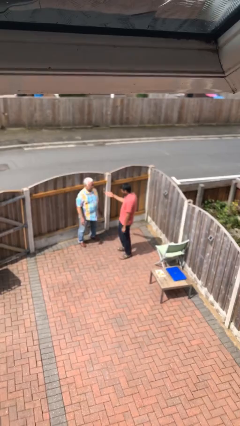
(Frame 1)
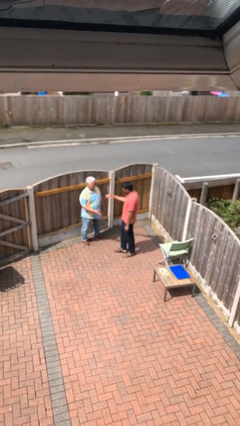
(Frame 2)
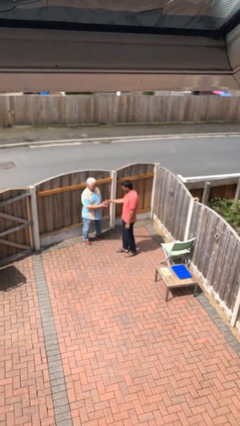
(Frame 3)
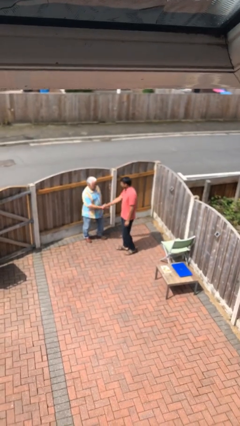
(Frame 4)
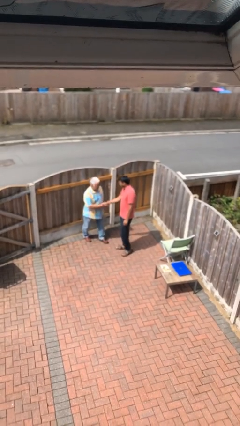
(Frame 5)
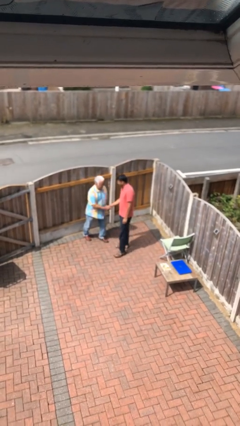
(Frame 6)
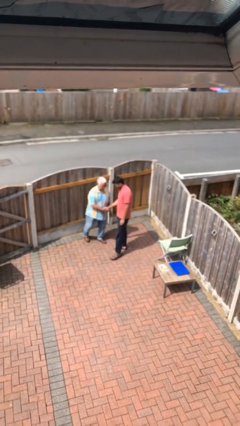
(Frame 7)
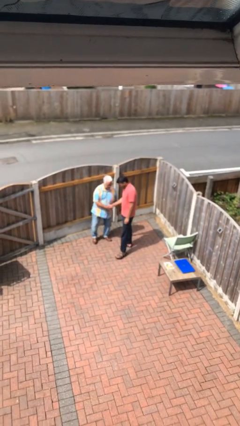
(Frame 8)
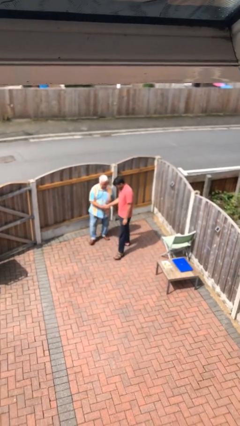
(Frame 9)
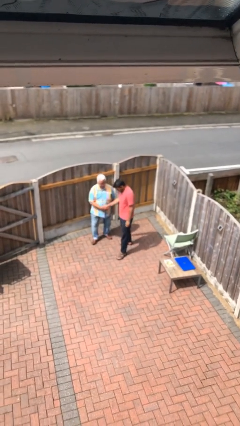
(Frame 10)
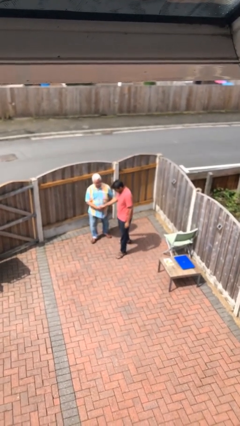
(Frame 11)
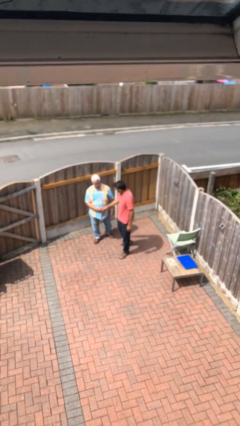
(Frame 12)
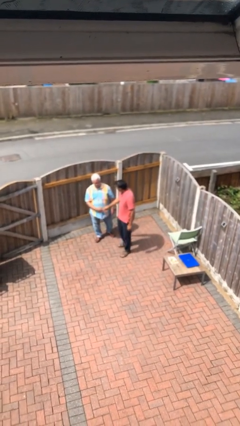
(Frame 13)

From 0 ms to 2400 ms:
person shakes hand

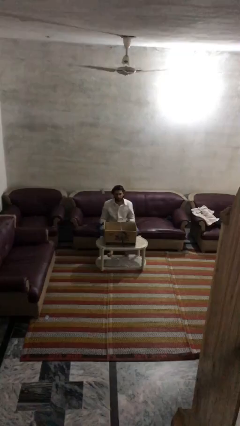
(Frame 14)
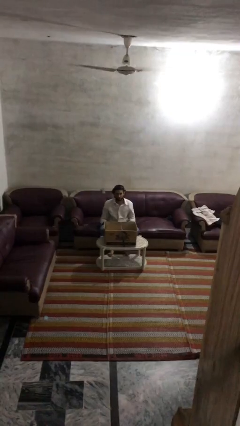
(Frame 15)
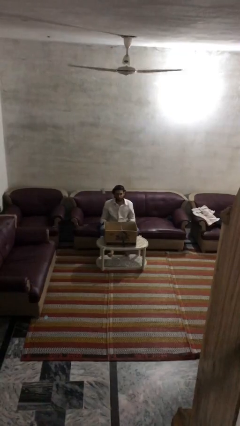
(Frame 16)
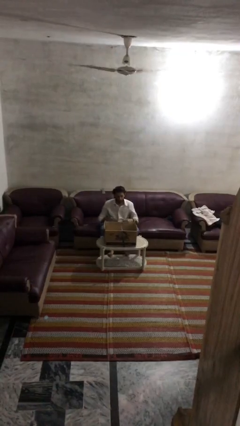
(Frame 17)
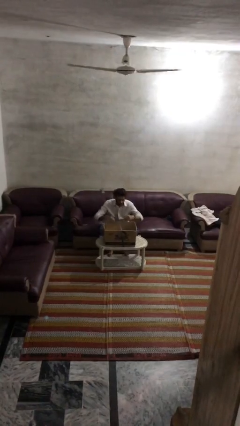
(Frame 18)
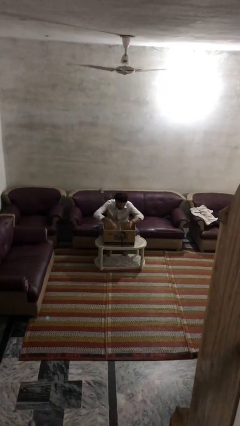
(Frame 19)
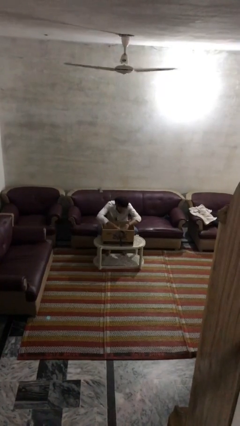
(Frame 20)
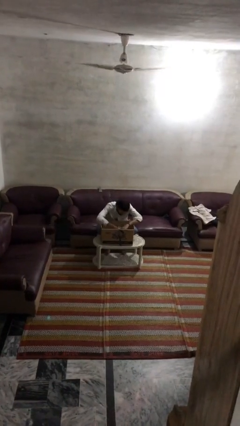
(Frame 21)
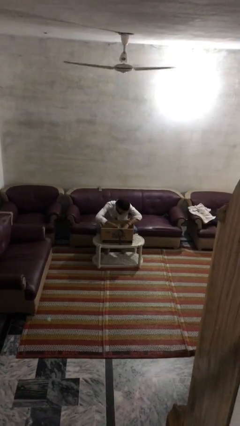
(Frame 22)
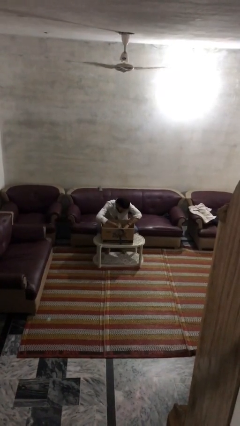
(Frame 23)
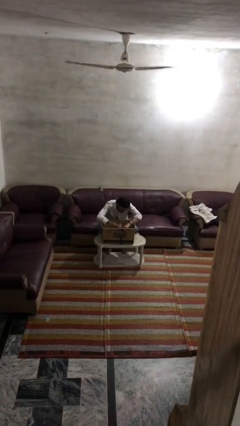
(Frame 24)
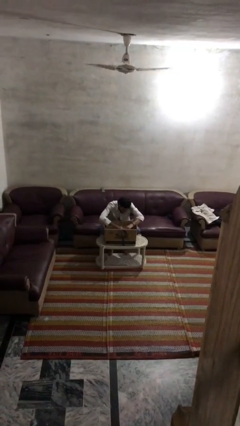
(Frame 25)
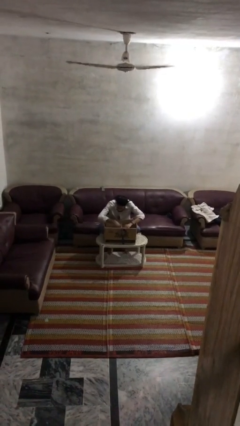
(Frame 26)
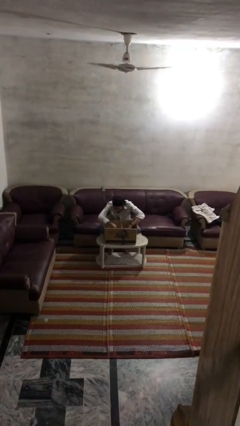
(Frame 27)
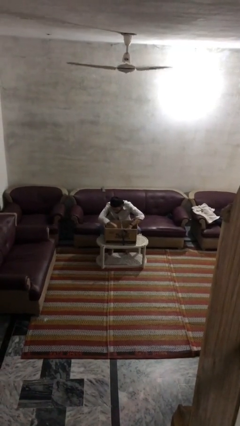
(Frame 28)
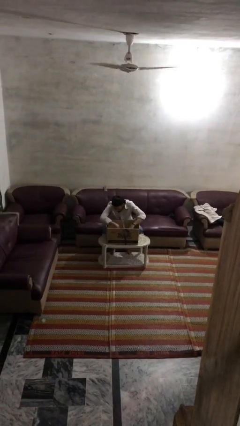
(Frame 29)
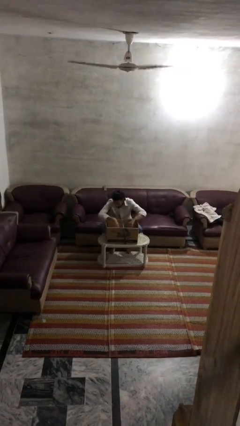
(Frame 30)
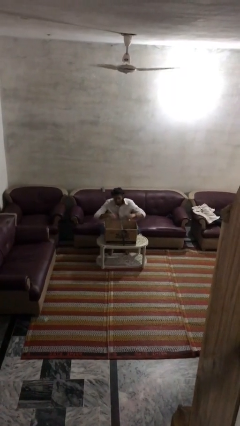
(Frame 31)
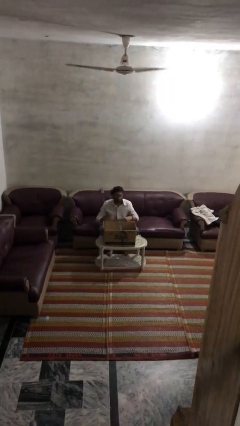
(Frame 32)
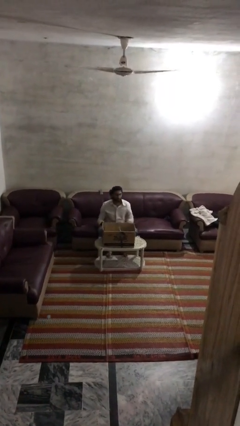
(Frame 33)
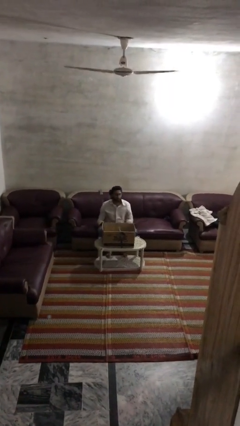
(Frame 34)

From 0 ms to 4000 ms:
person searches in box

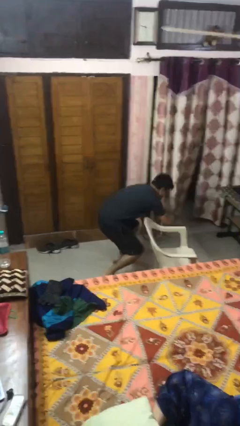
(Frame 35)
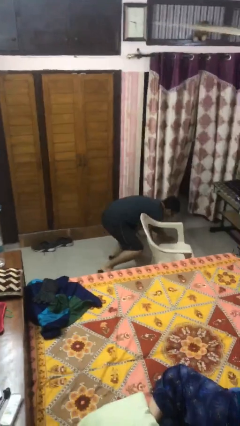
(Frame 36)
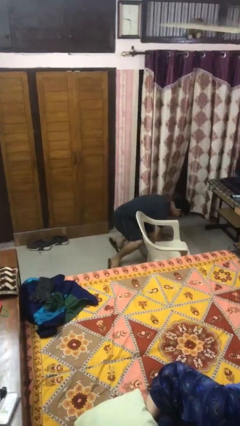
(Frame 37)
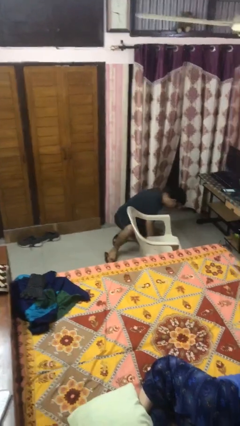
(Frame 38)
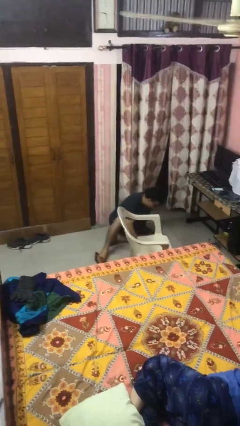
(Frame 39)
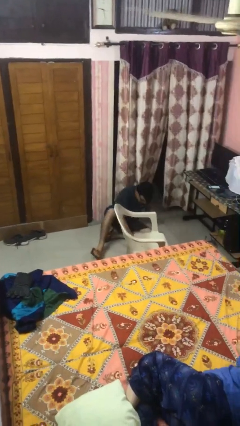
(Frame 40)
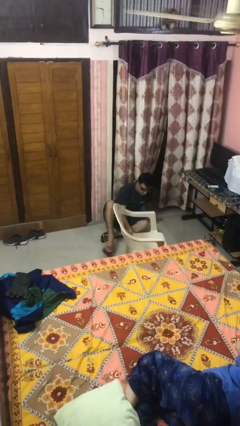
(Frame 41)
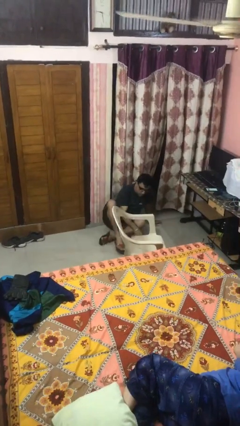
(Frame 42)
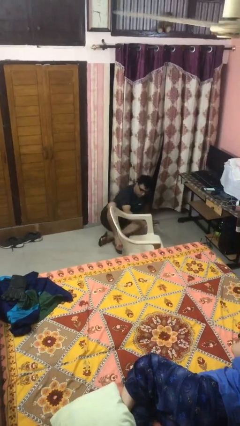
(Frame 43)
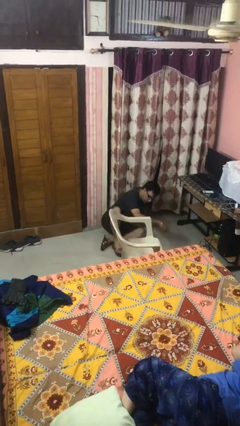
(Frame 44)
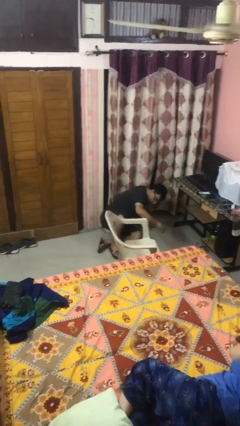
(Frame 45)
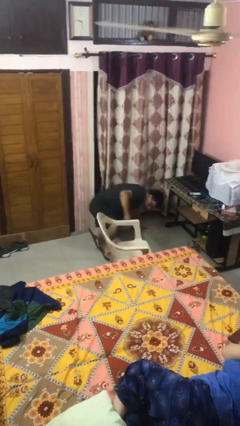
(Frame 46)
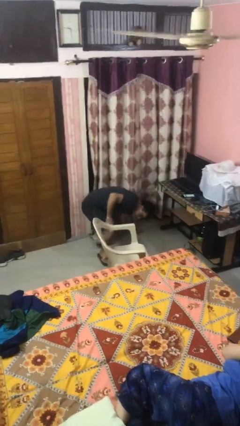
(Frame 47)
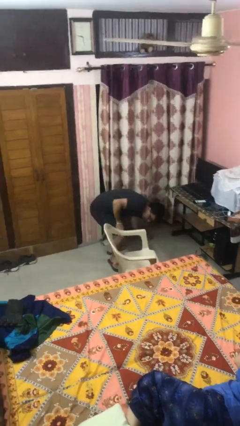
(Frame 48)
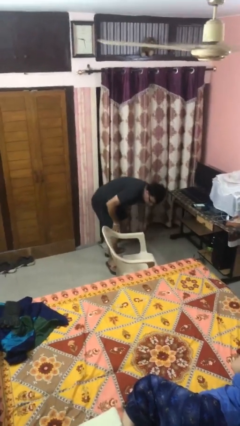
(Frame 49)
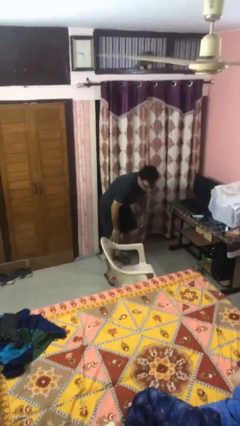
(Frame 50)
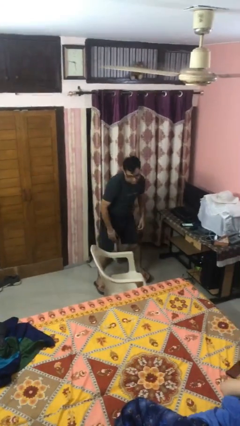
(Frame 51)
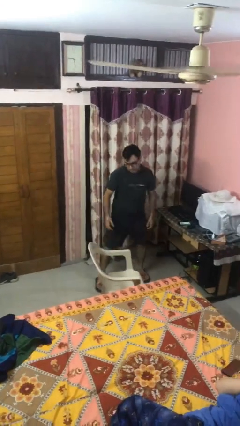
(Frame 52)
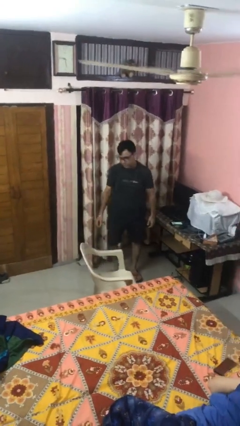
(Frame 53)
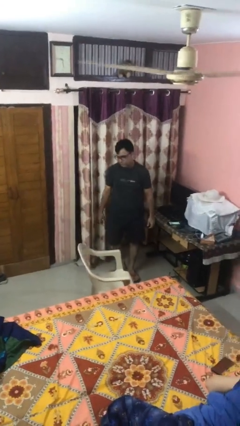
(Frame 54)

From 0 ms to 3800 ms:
person stands up from floor

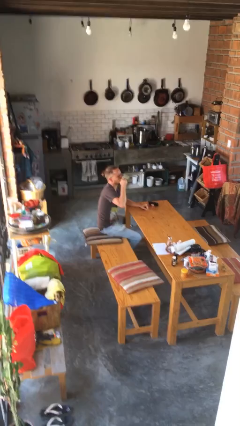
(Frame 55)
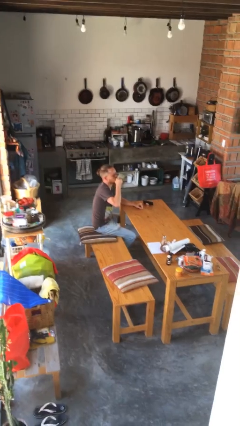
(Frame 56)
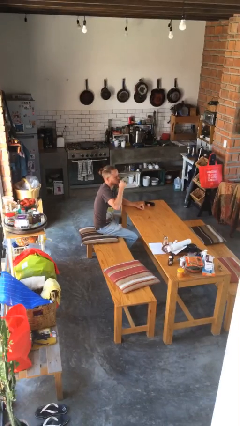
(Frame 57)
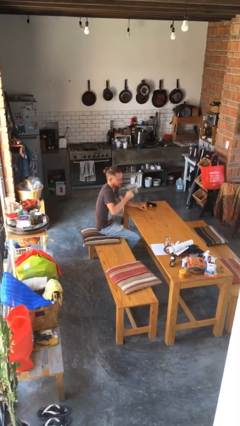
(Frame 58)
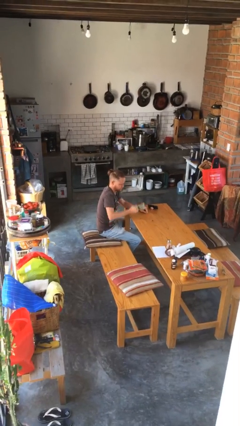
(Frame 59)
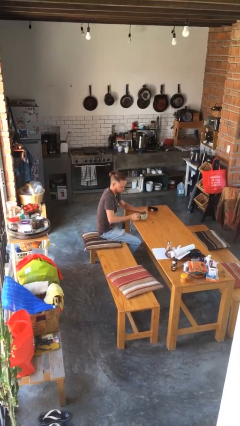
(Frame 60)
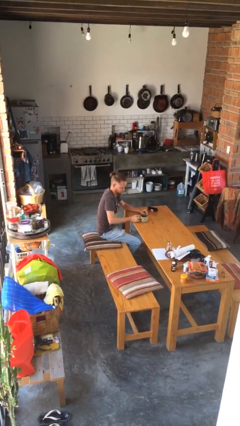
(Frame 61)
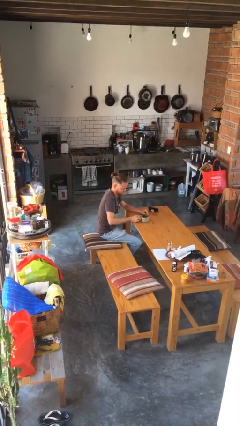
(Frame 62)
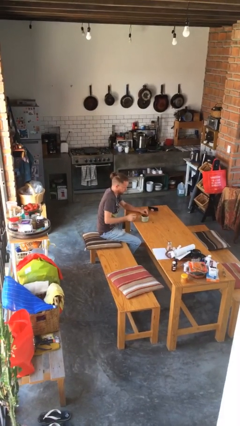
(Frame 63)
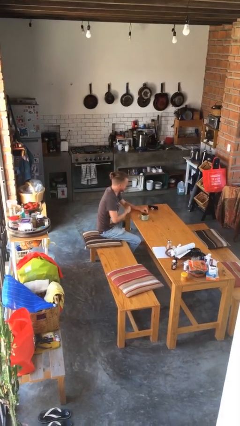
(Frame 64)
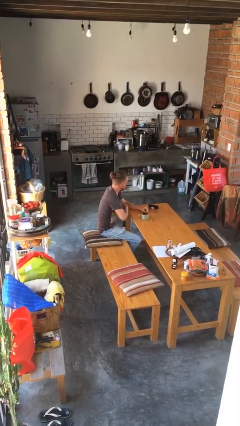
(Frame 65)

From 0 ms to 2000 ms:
person puts down object on table

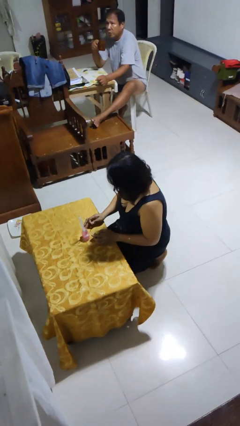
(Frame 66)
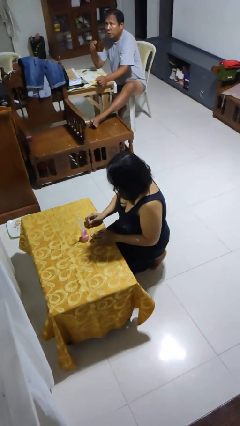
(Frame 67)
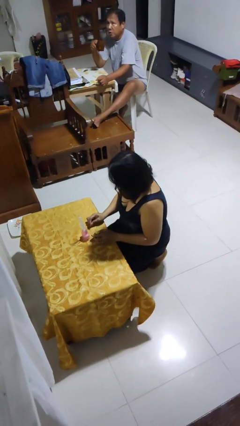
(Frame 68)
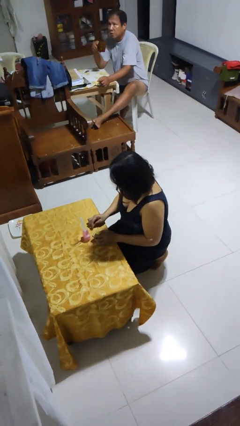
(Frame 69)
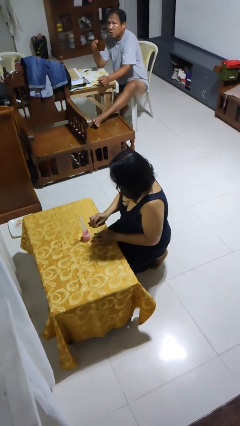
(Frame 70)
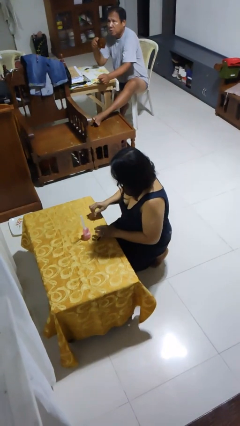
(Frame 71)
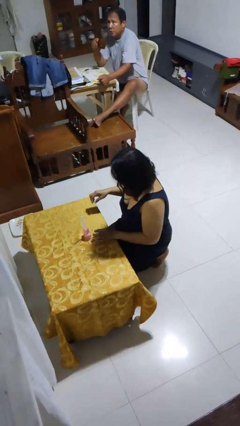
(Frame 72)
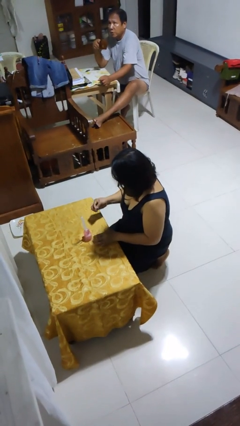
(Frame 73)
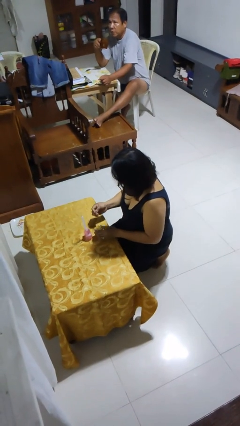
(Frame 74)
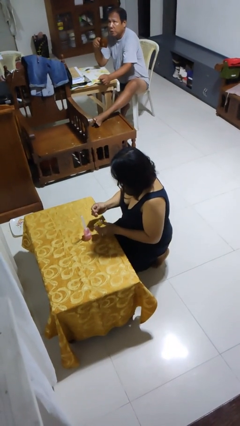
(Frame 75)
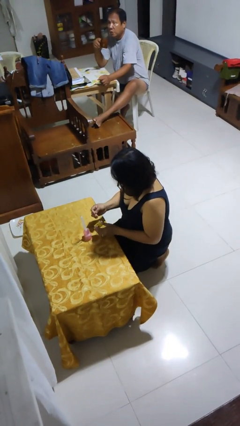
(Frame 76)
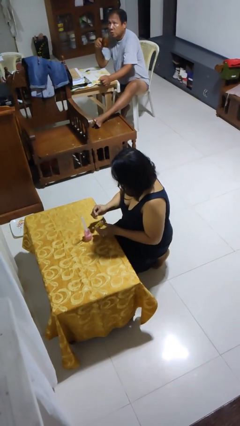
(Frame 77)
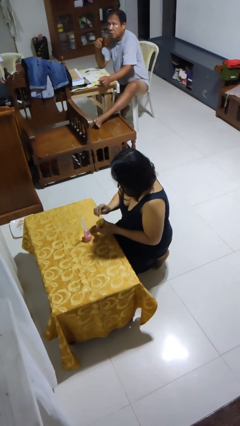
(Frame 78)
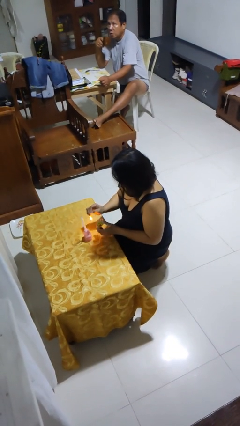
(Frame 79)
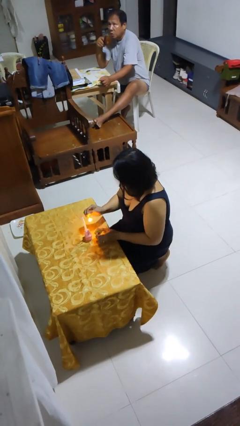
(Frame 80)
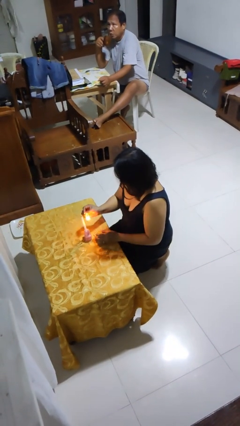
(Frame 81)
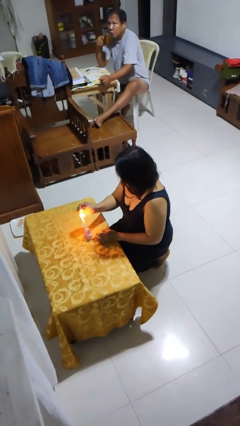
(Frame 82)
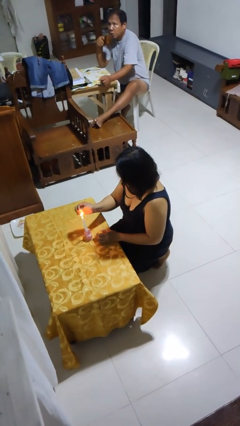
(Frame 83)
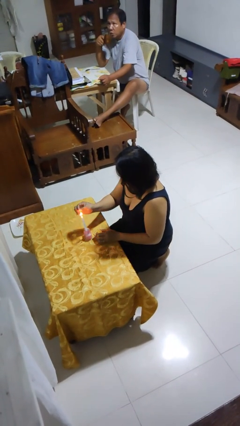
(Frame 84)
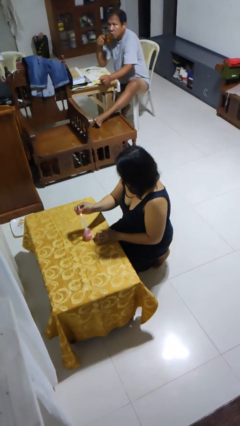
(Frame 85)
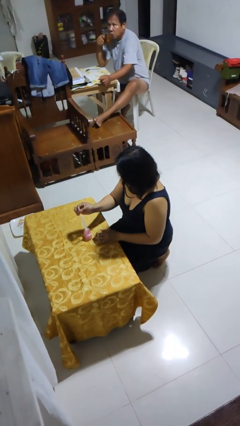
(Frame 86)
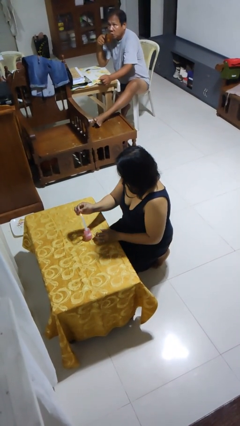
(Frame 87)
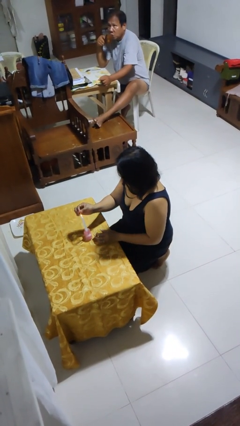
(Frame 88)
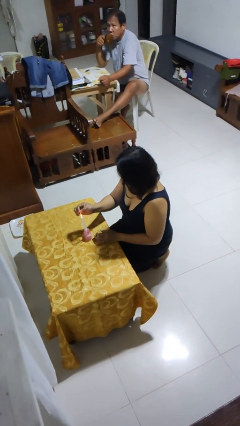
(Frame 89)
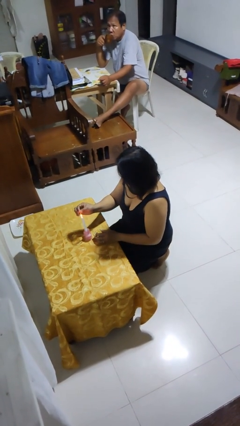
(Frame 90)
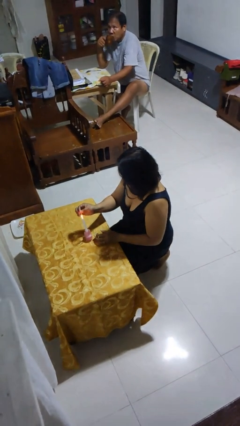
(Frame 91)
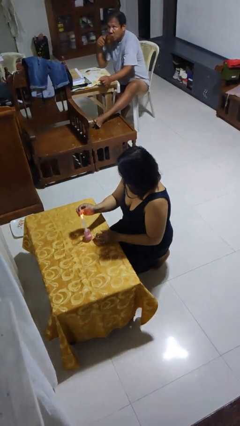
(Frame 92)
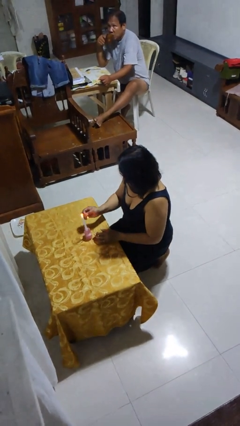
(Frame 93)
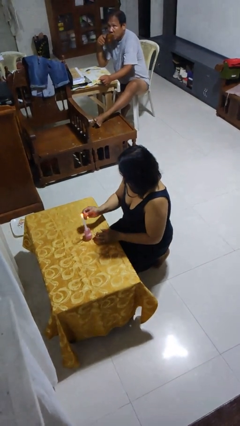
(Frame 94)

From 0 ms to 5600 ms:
person lights candle
